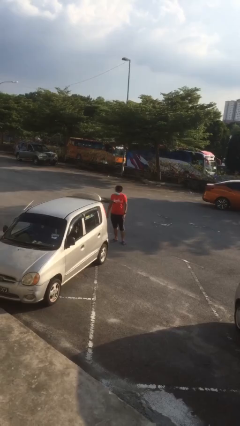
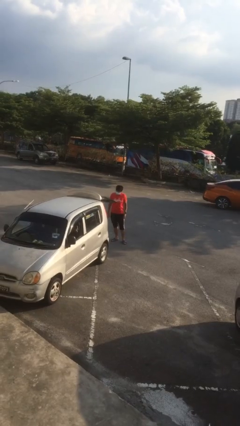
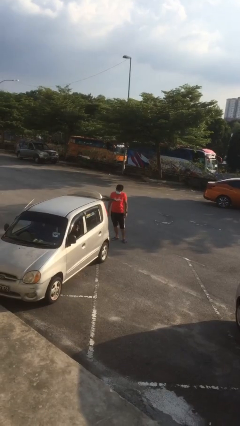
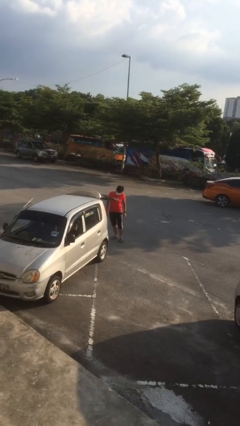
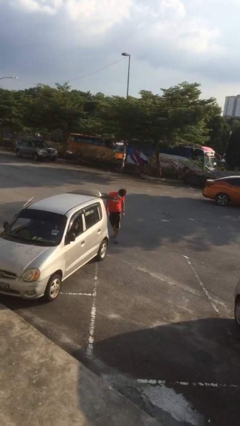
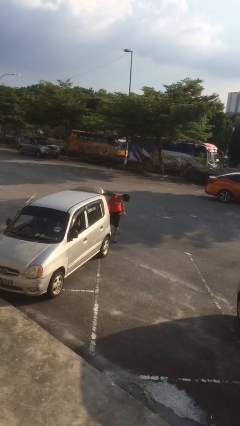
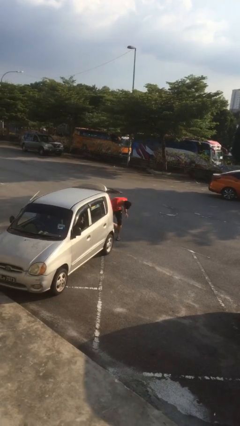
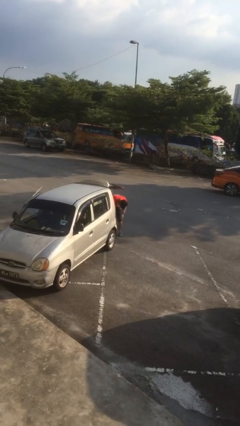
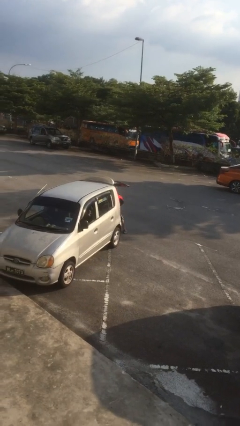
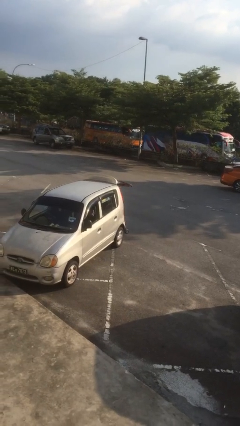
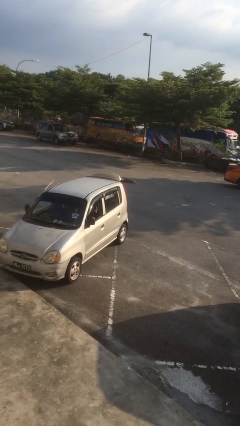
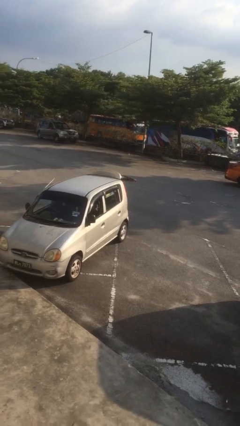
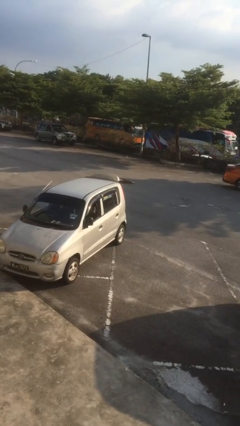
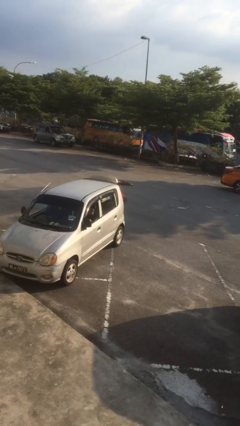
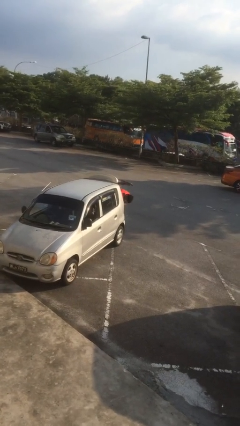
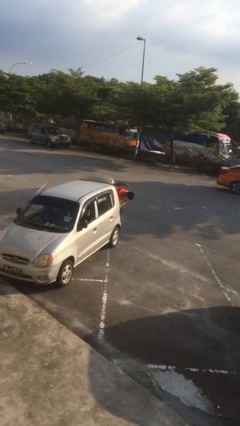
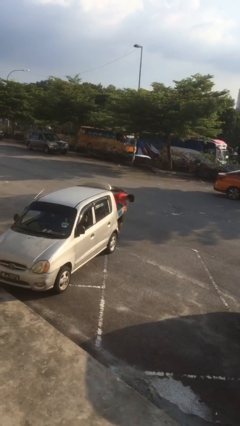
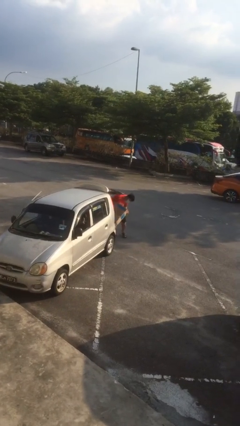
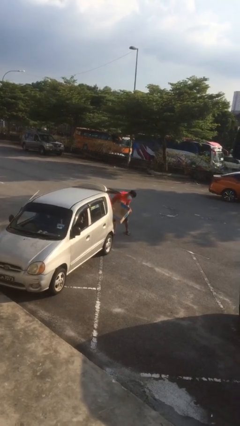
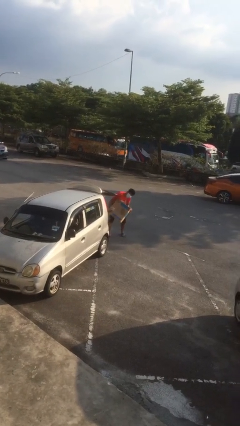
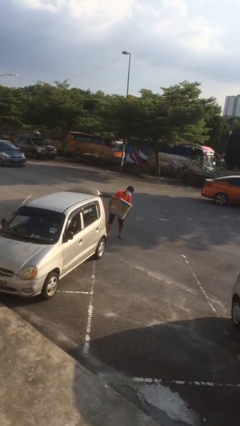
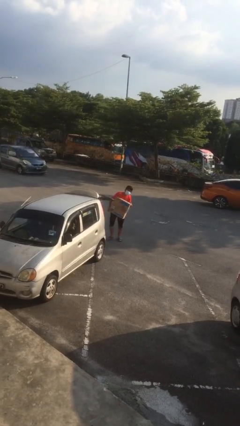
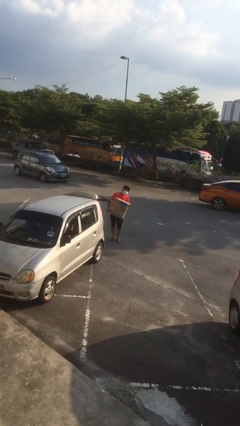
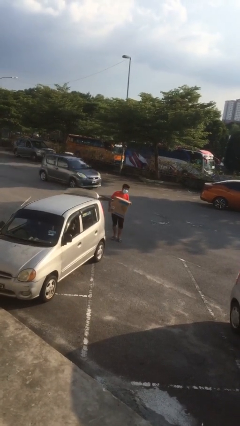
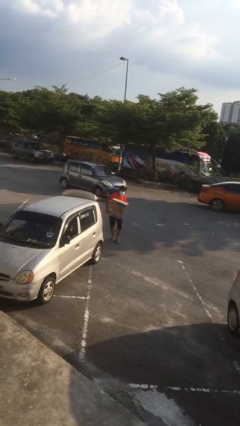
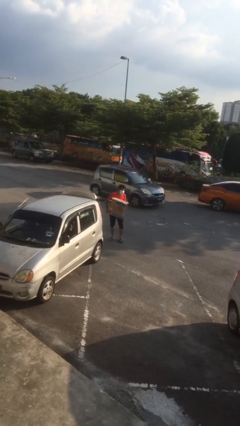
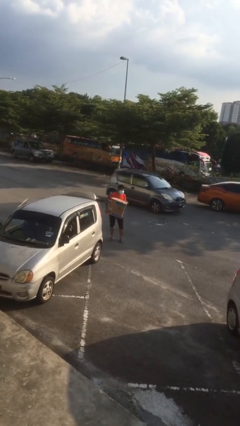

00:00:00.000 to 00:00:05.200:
person unloads car

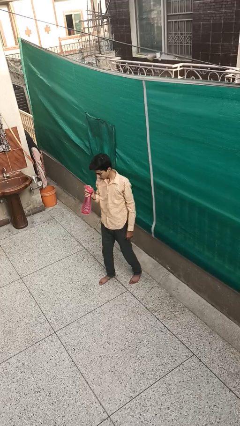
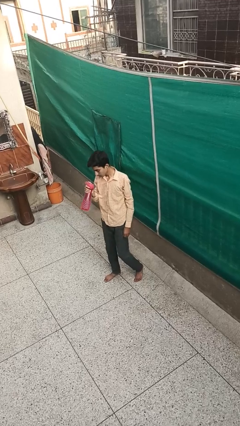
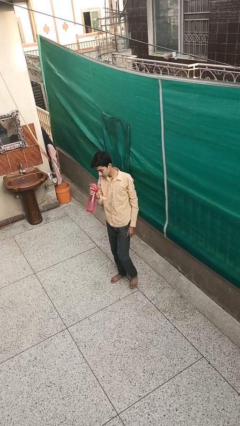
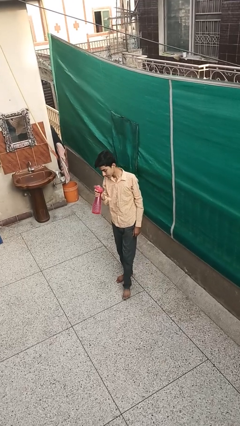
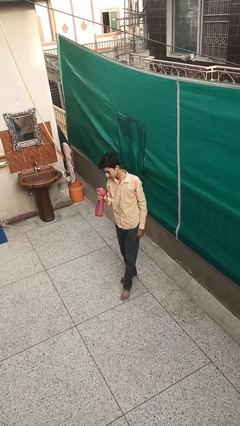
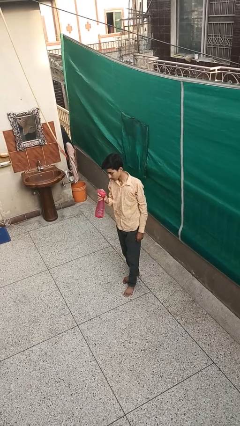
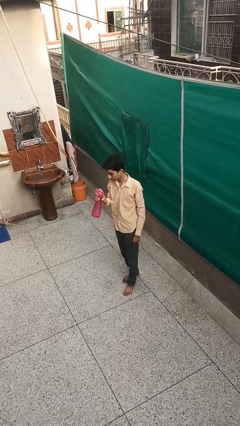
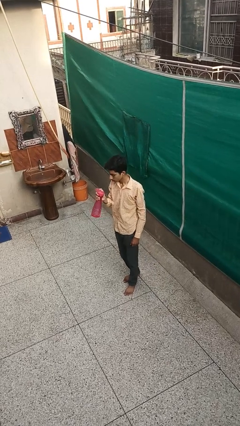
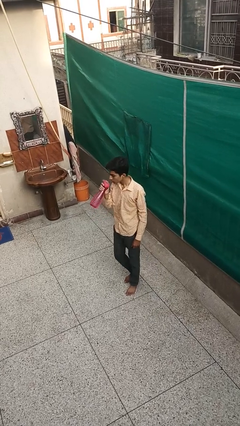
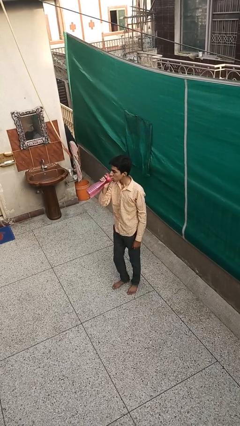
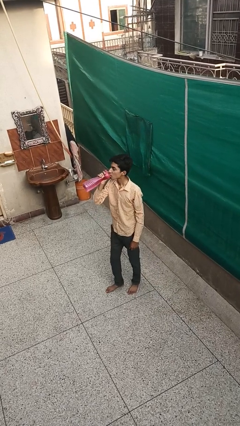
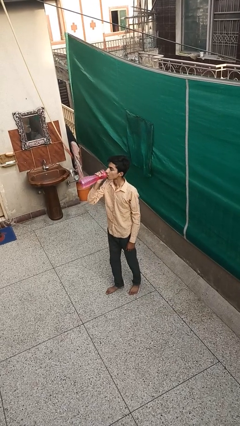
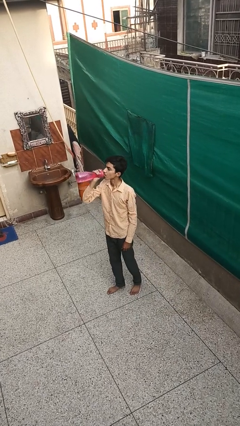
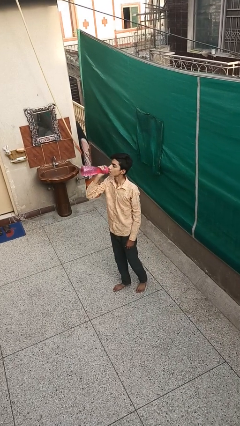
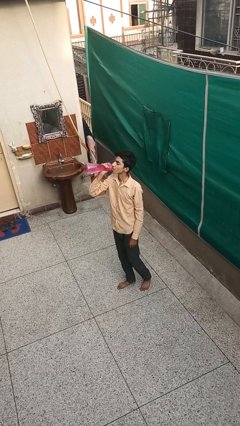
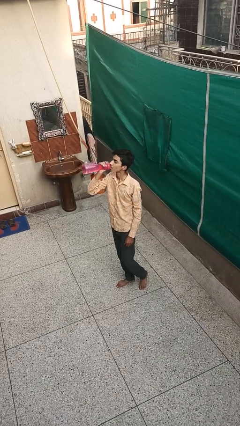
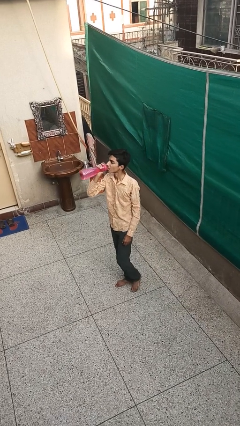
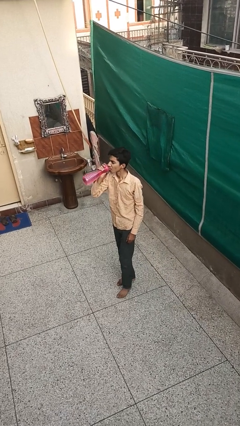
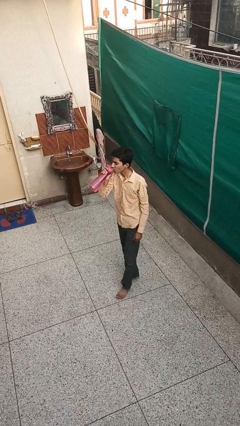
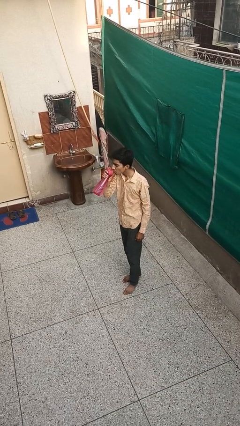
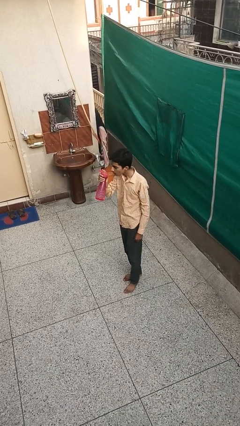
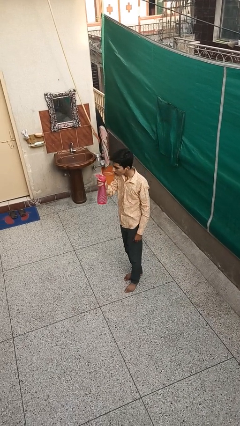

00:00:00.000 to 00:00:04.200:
person drinks from bottle

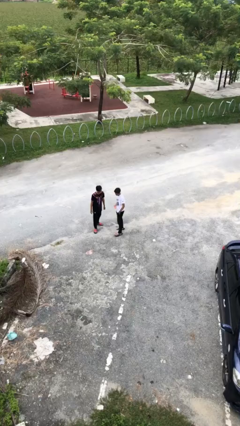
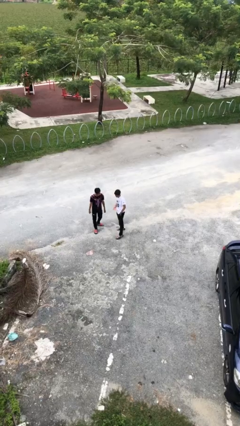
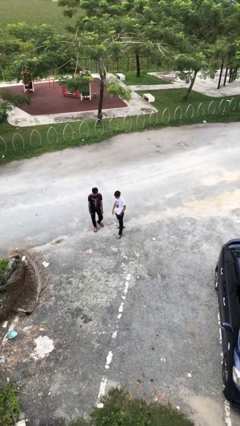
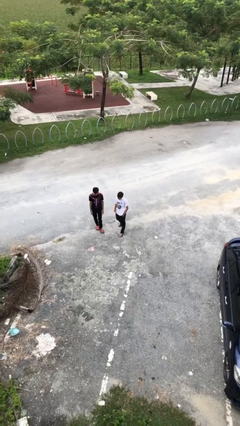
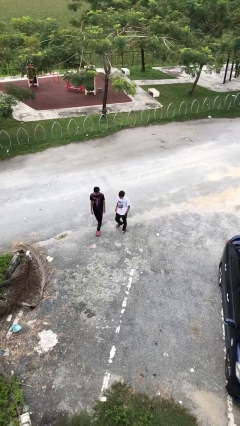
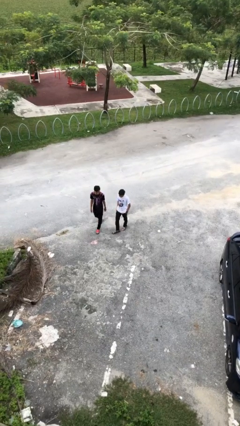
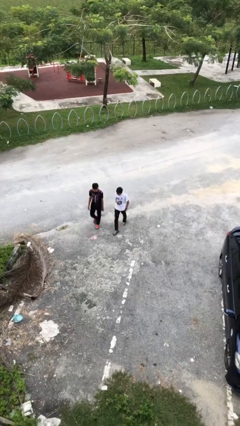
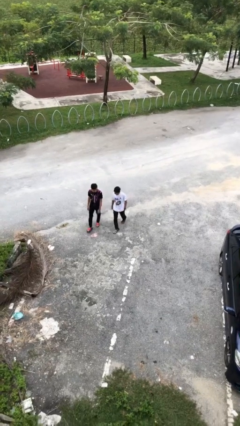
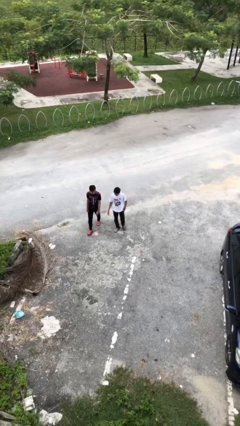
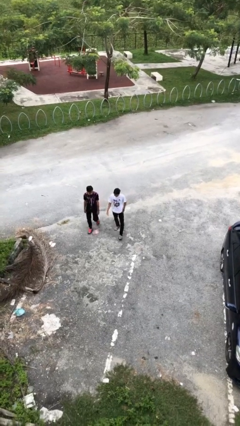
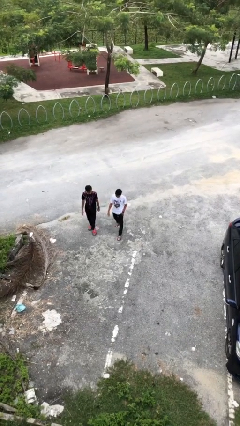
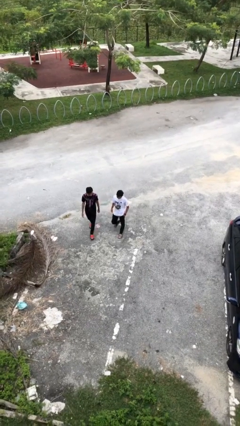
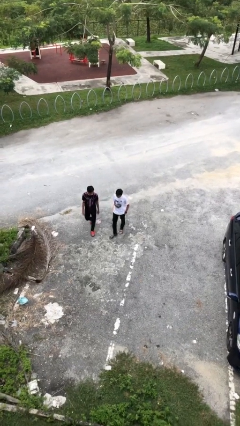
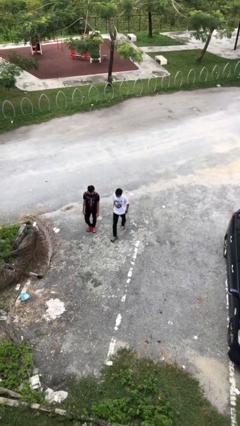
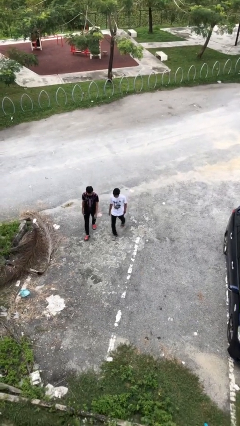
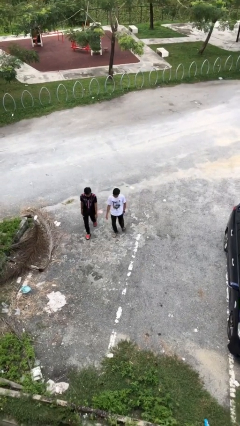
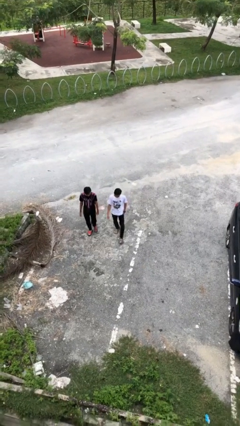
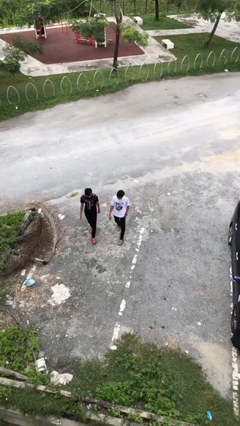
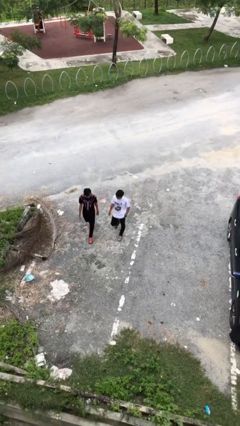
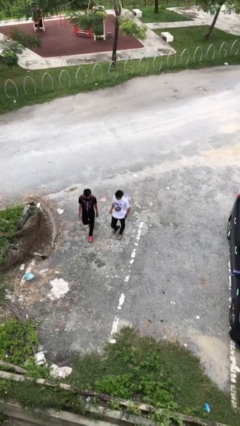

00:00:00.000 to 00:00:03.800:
person talks to person

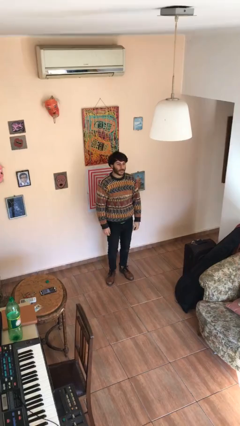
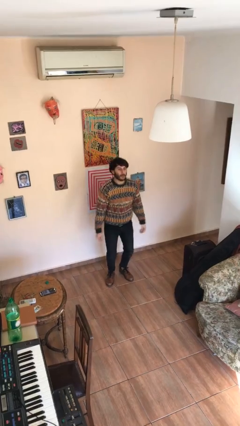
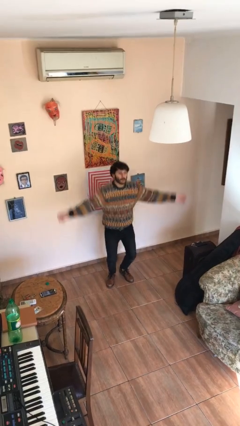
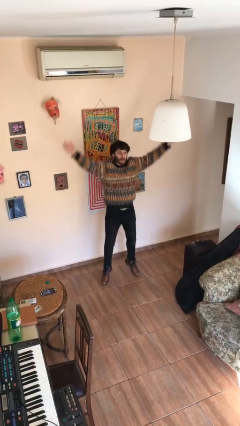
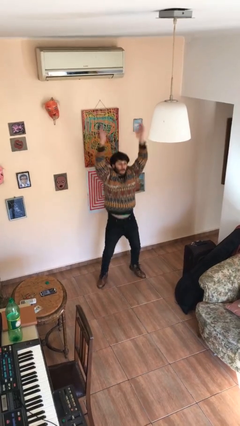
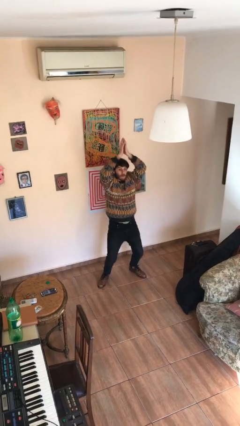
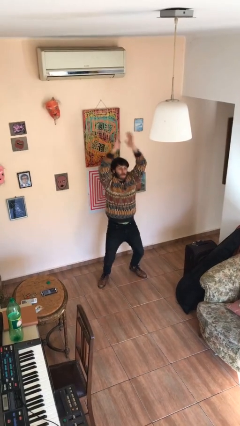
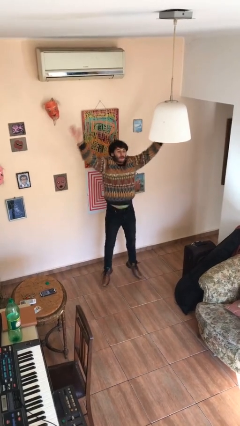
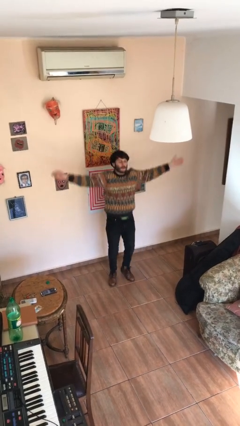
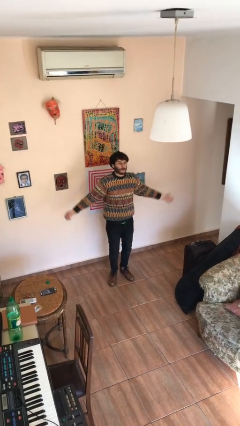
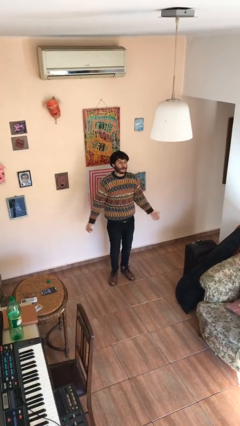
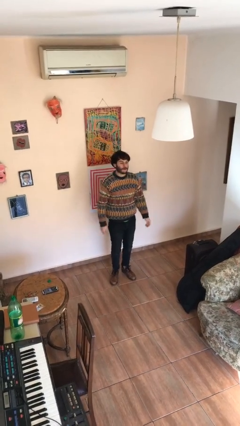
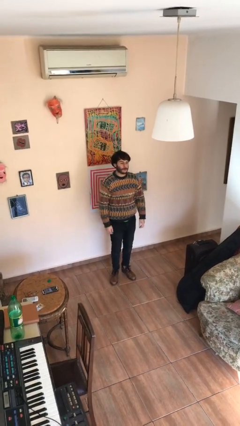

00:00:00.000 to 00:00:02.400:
person exercises with jumping jacks

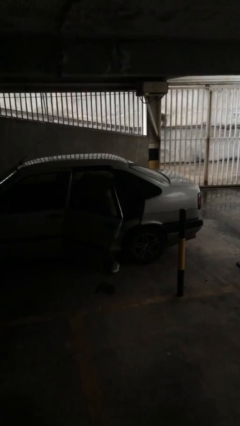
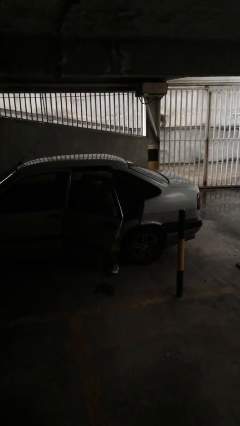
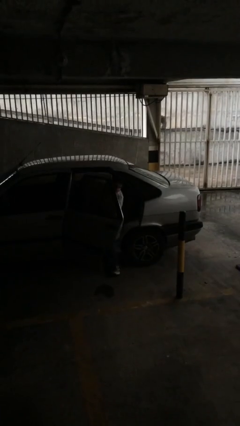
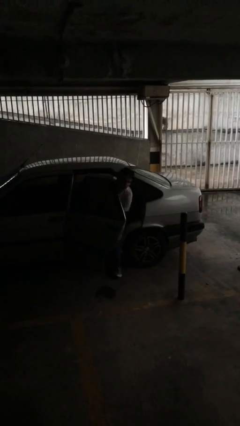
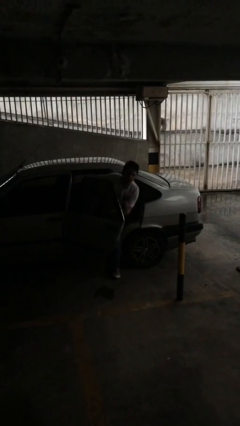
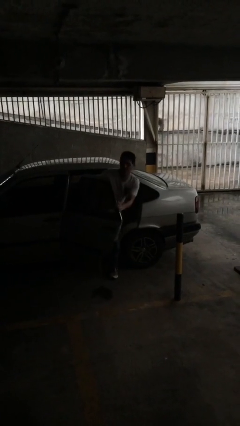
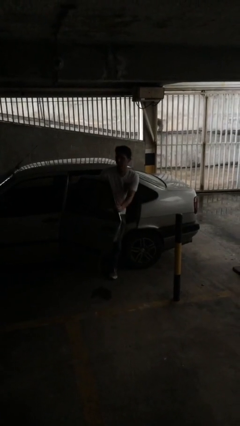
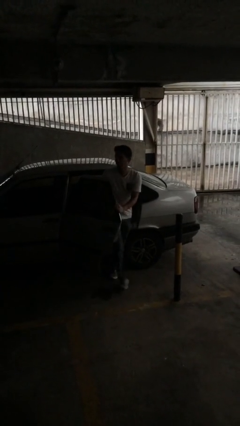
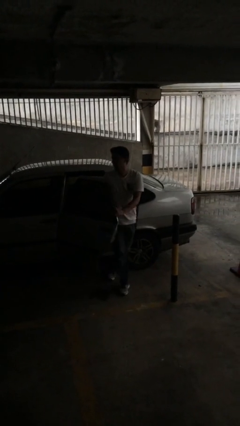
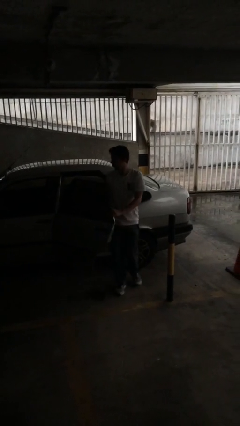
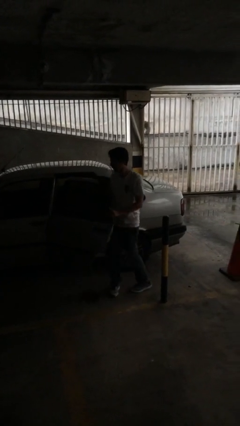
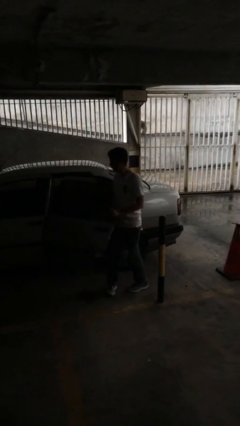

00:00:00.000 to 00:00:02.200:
person exits car
